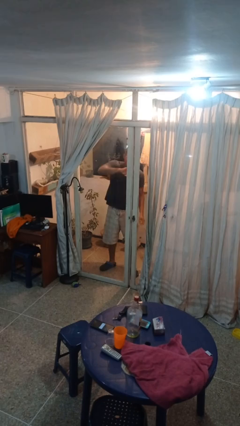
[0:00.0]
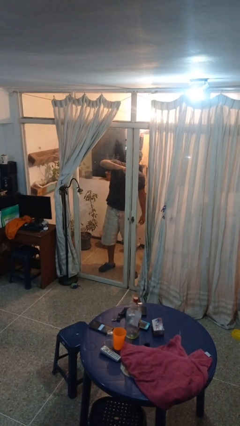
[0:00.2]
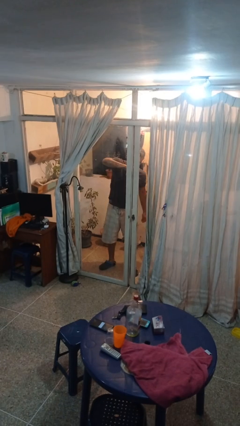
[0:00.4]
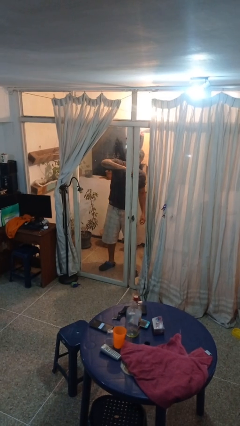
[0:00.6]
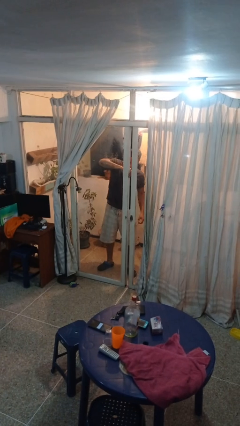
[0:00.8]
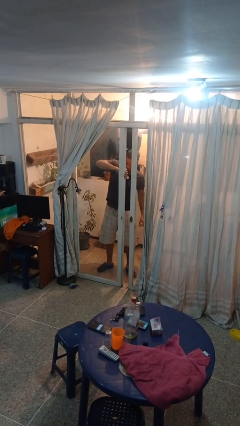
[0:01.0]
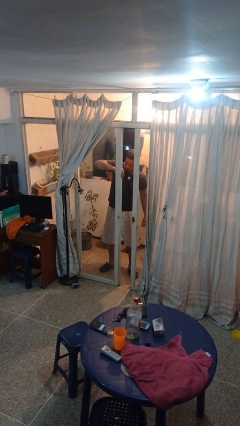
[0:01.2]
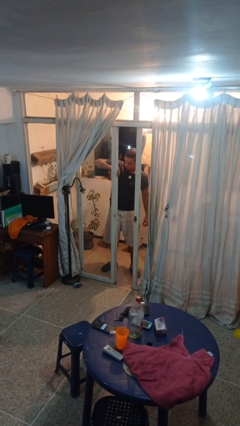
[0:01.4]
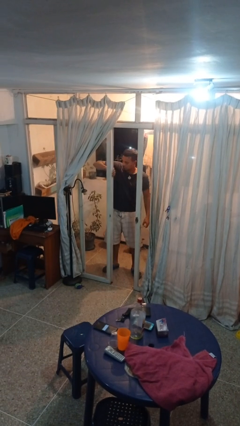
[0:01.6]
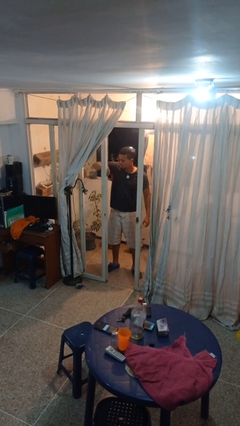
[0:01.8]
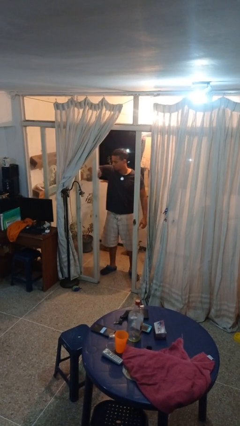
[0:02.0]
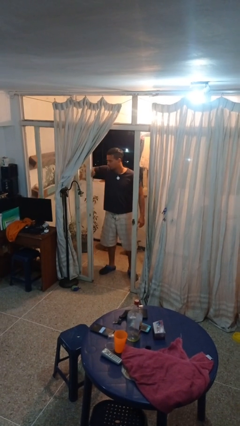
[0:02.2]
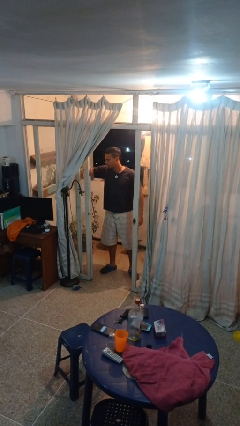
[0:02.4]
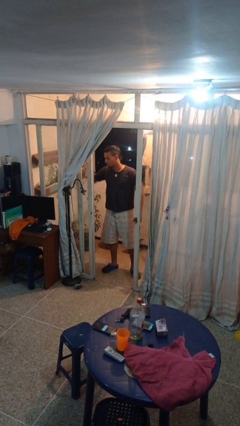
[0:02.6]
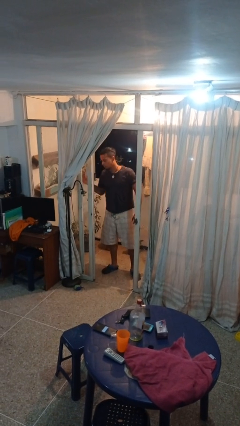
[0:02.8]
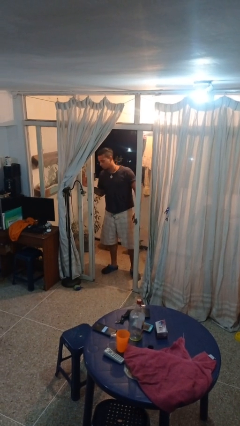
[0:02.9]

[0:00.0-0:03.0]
person opens sliding door

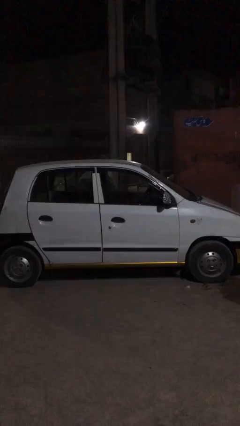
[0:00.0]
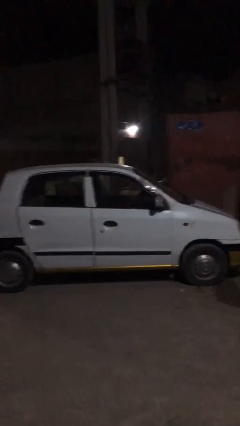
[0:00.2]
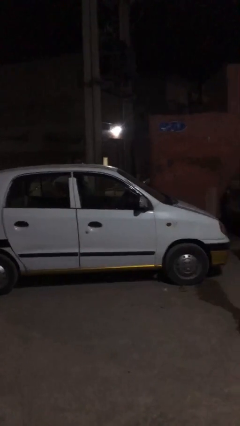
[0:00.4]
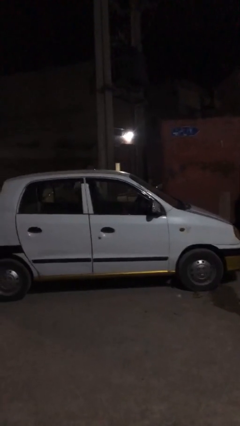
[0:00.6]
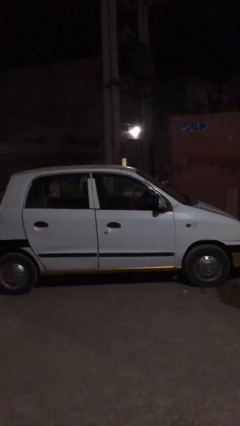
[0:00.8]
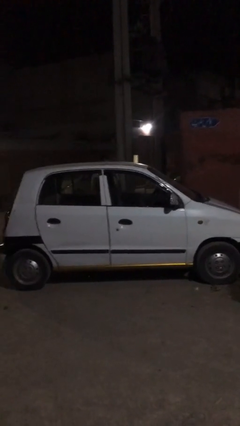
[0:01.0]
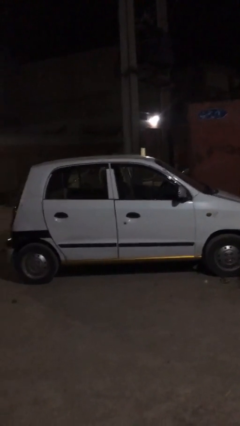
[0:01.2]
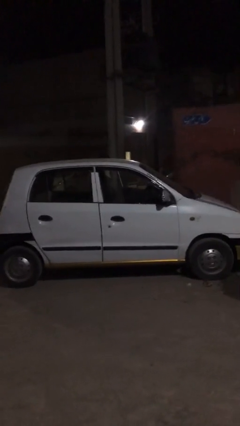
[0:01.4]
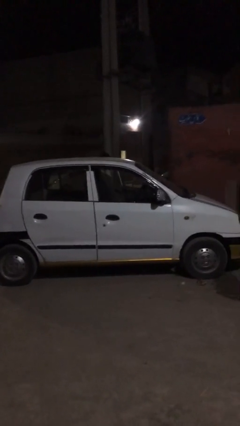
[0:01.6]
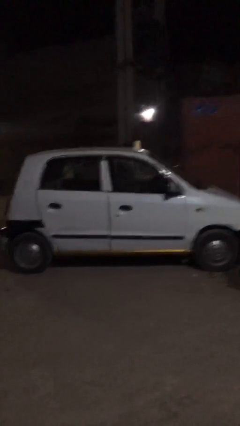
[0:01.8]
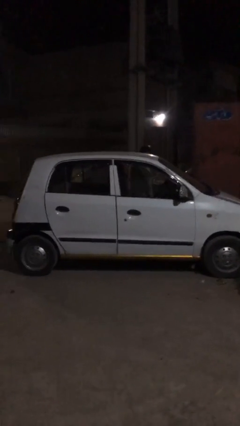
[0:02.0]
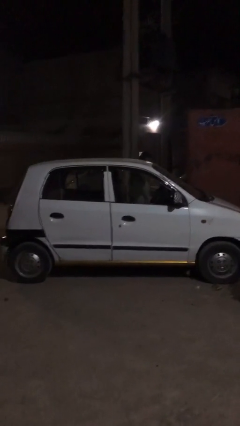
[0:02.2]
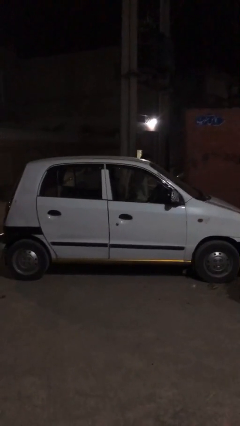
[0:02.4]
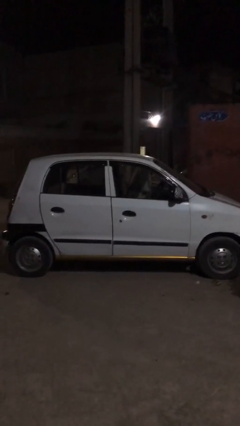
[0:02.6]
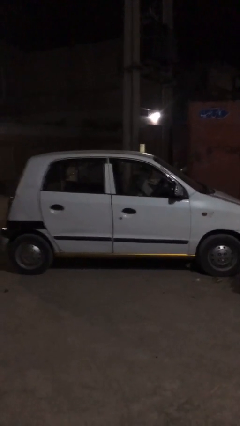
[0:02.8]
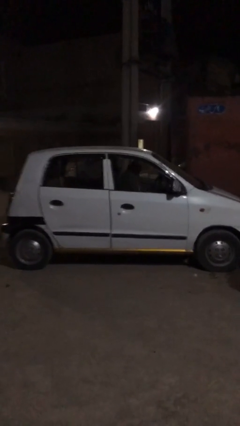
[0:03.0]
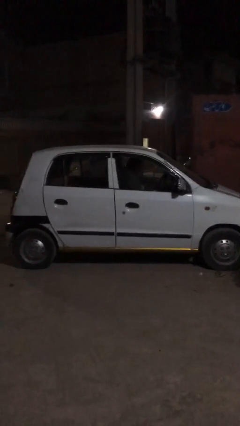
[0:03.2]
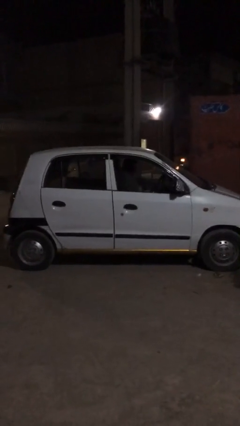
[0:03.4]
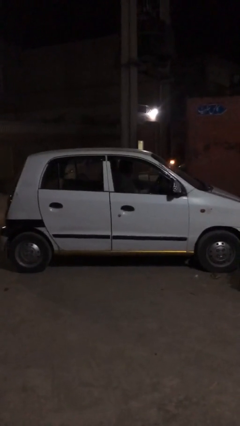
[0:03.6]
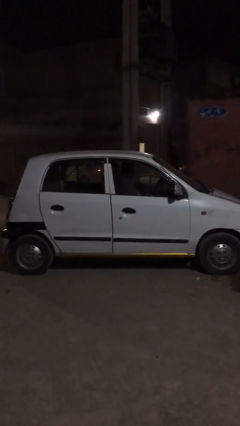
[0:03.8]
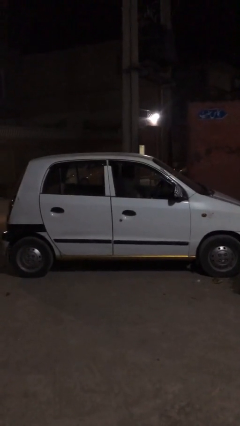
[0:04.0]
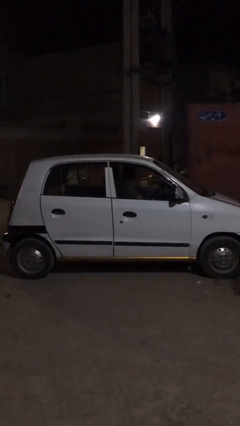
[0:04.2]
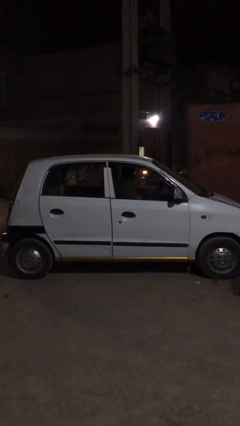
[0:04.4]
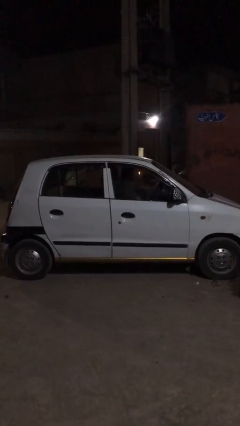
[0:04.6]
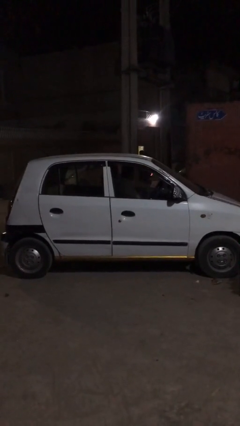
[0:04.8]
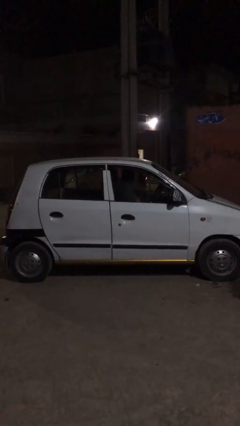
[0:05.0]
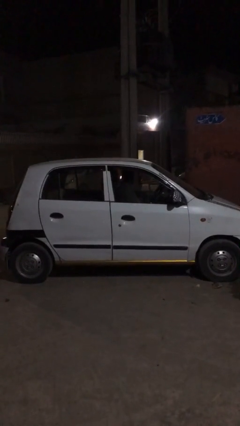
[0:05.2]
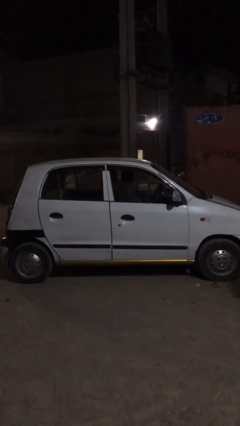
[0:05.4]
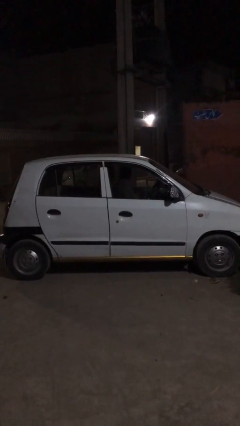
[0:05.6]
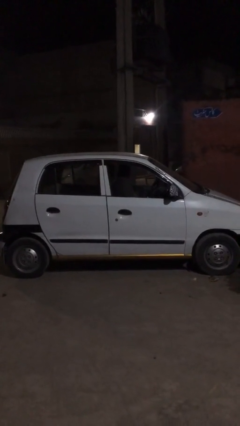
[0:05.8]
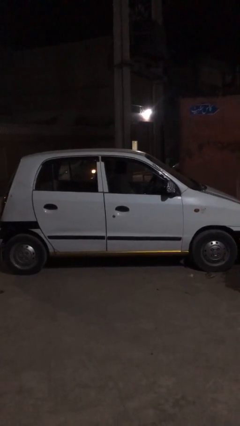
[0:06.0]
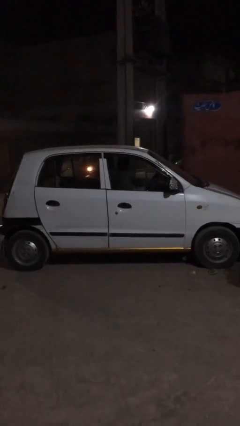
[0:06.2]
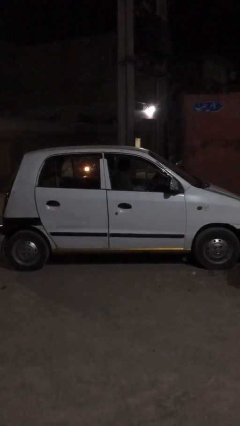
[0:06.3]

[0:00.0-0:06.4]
car picks up person

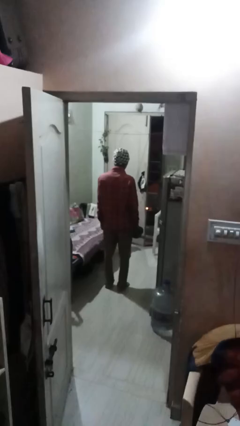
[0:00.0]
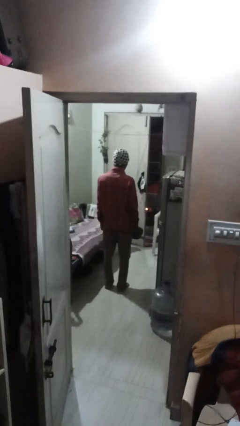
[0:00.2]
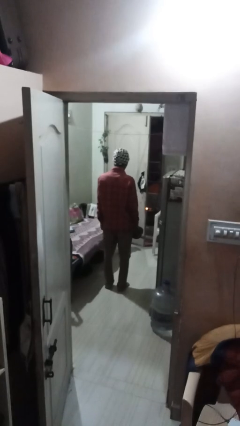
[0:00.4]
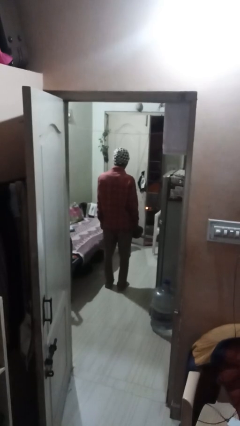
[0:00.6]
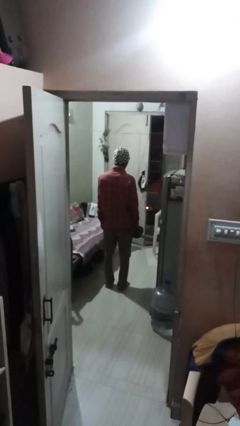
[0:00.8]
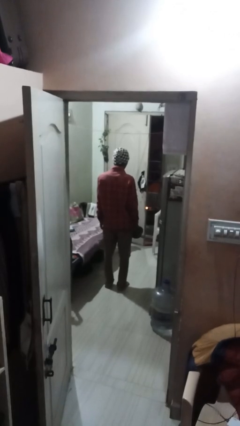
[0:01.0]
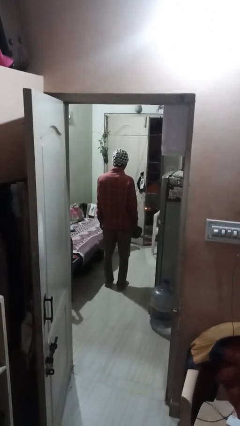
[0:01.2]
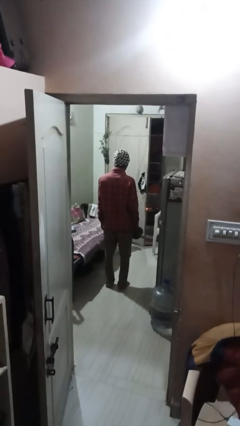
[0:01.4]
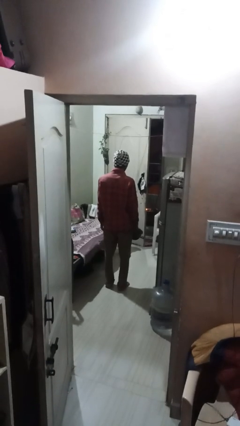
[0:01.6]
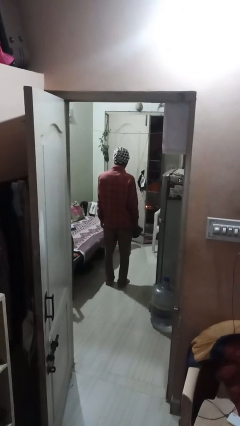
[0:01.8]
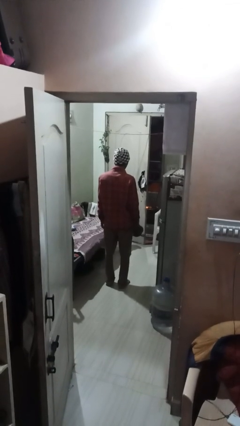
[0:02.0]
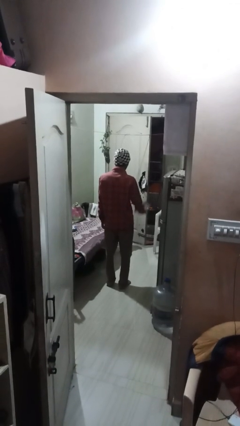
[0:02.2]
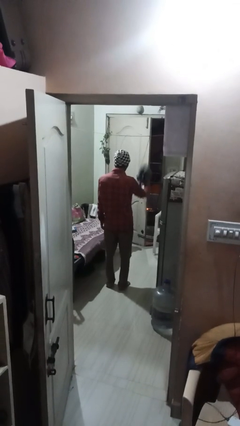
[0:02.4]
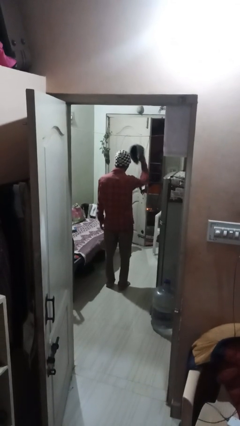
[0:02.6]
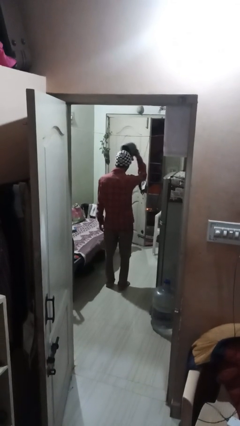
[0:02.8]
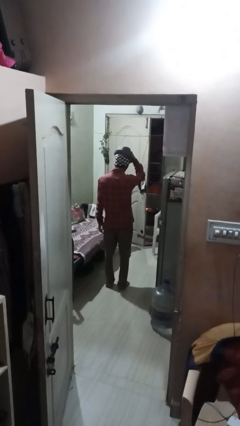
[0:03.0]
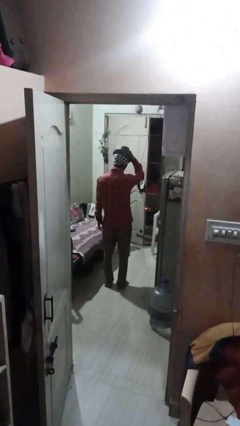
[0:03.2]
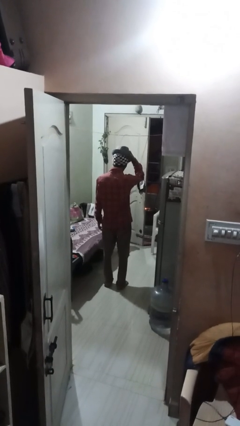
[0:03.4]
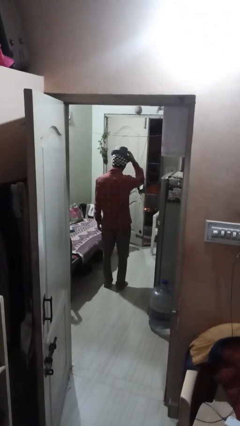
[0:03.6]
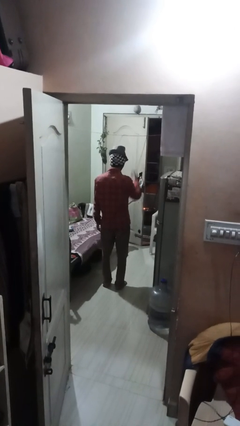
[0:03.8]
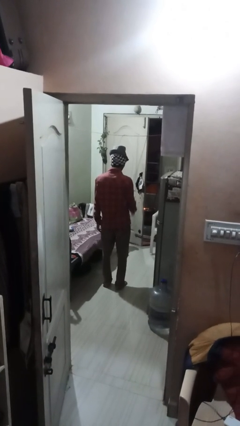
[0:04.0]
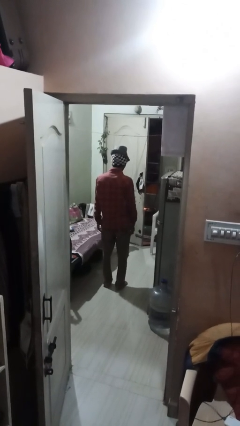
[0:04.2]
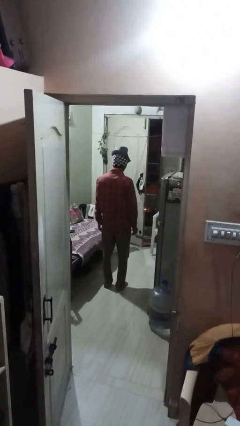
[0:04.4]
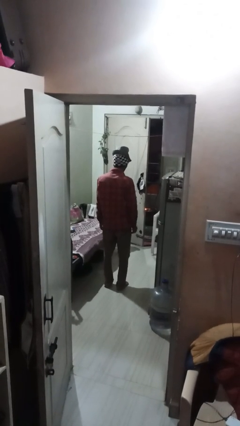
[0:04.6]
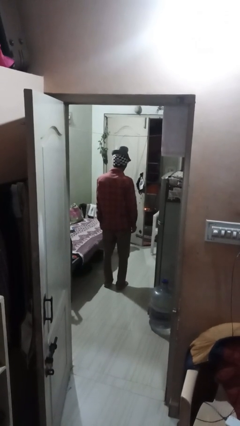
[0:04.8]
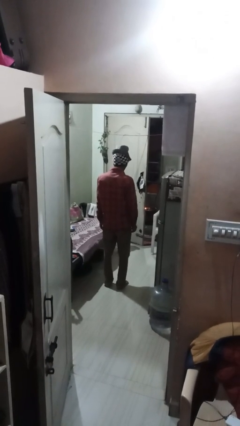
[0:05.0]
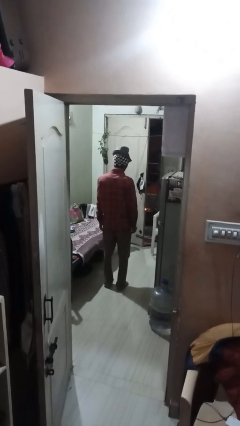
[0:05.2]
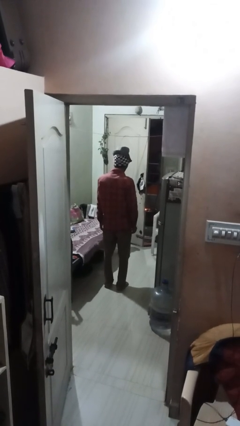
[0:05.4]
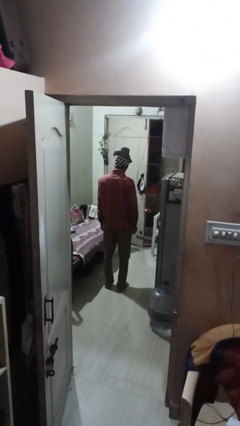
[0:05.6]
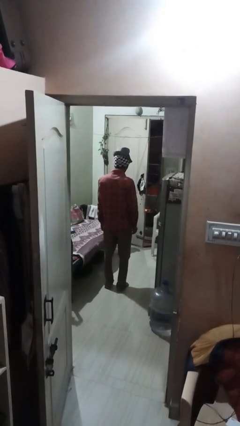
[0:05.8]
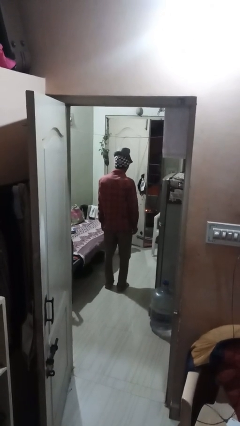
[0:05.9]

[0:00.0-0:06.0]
person puts on hat

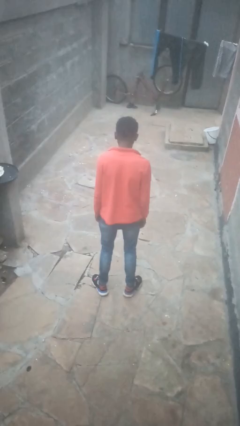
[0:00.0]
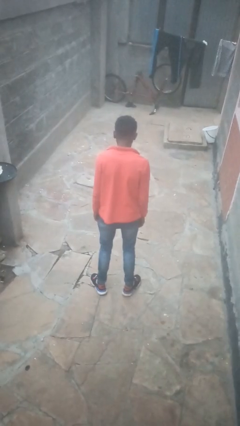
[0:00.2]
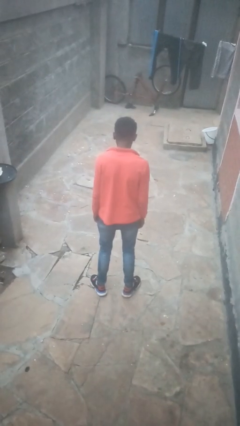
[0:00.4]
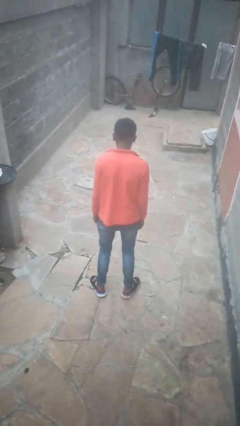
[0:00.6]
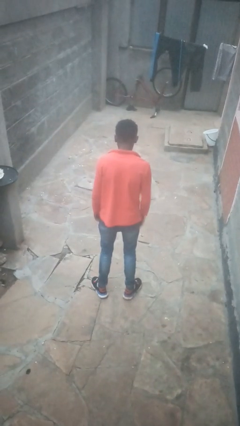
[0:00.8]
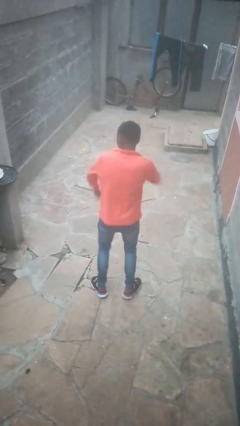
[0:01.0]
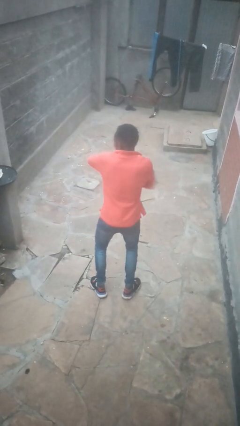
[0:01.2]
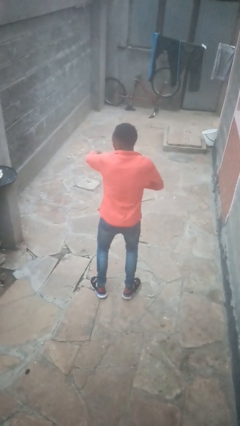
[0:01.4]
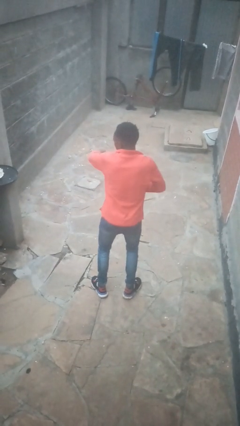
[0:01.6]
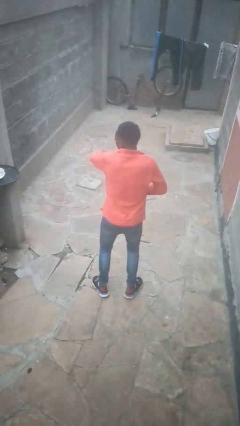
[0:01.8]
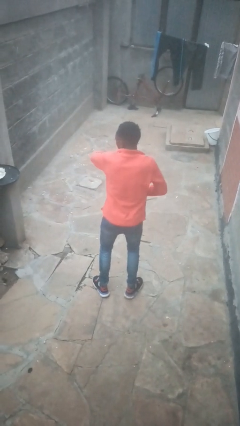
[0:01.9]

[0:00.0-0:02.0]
person swats bug

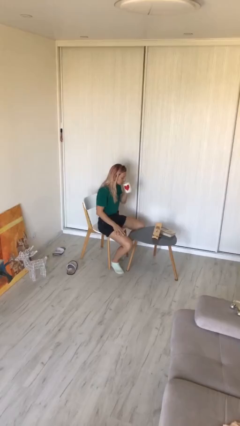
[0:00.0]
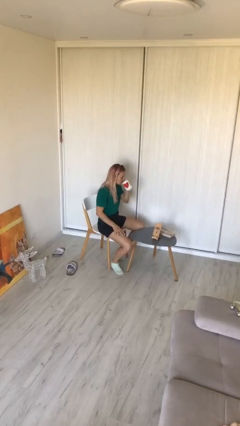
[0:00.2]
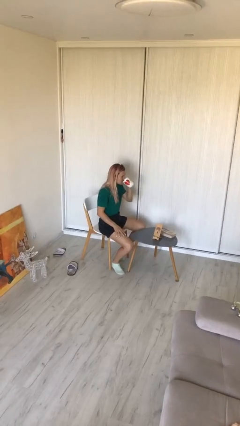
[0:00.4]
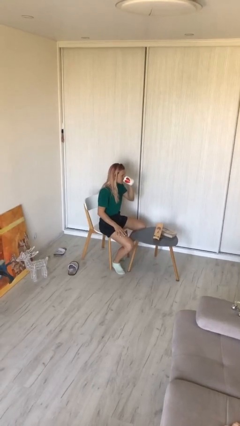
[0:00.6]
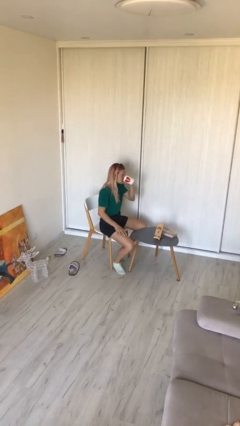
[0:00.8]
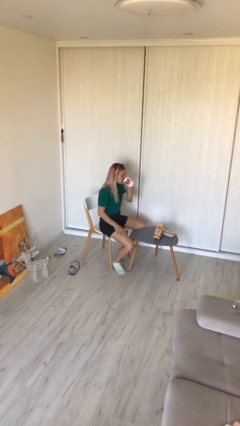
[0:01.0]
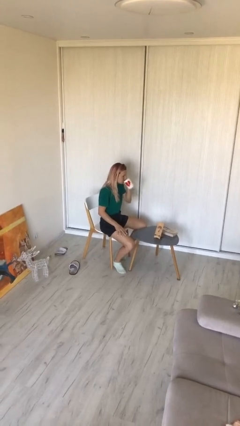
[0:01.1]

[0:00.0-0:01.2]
person drinks from mug
